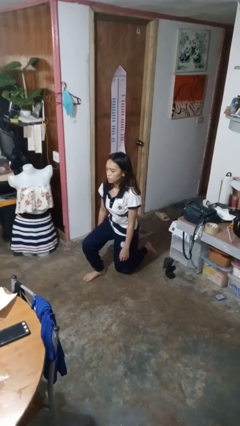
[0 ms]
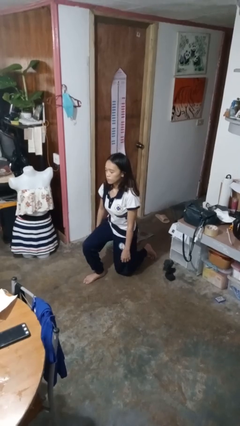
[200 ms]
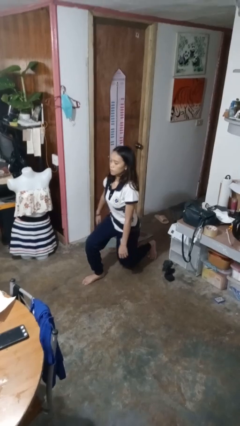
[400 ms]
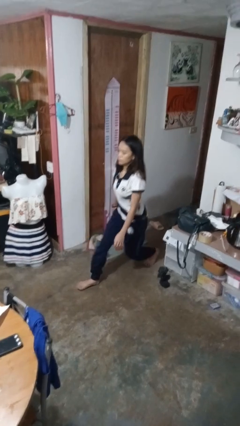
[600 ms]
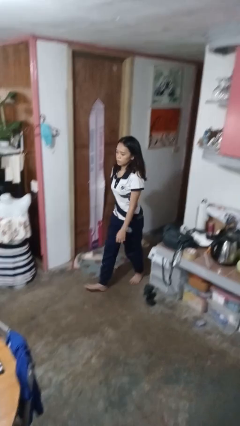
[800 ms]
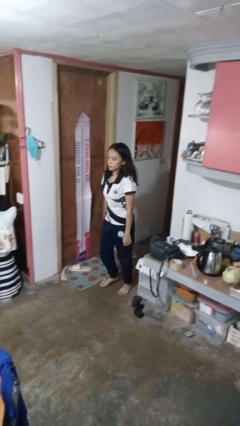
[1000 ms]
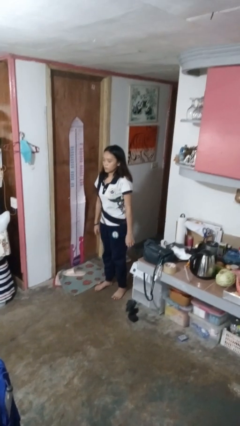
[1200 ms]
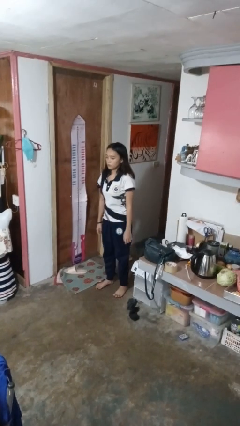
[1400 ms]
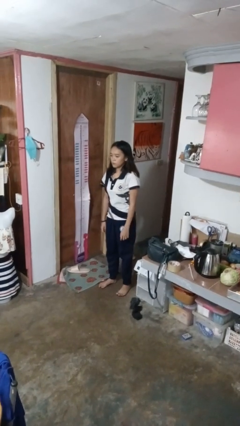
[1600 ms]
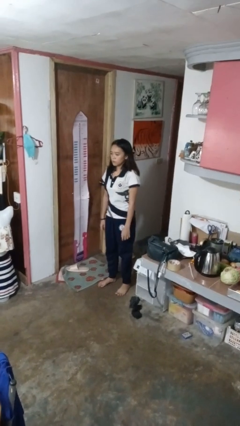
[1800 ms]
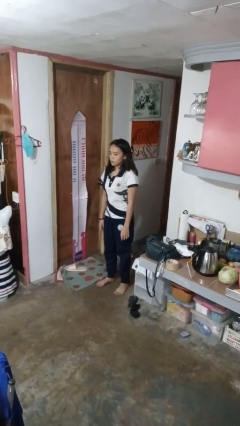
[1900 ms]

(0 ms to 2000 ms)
person stands up from floor

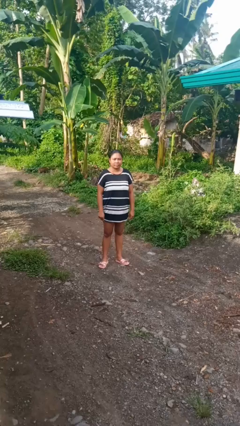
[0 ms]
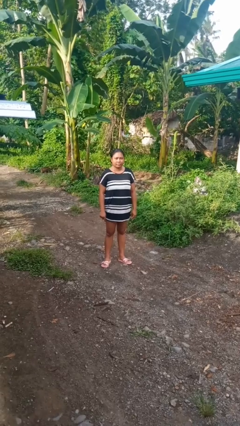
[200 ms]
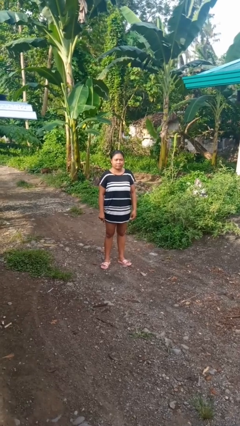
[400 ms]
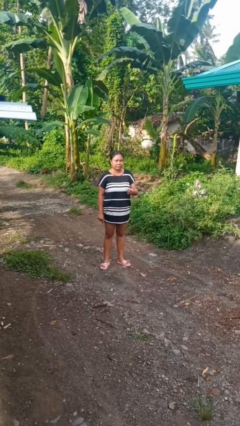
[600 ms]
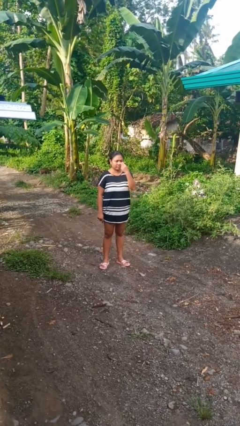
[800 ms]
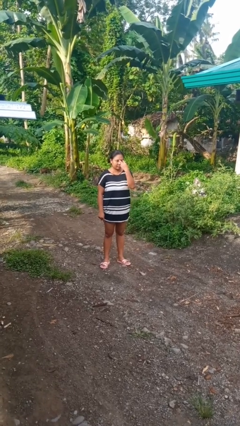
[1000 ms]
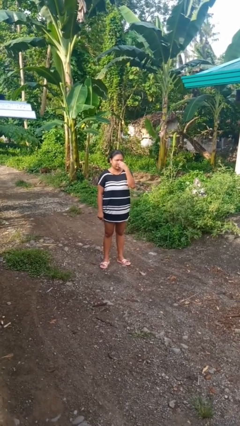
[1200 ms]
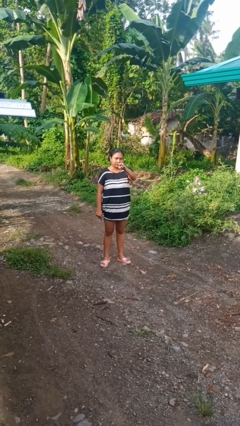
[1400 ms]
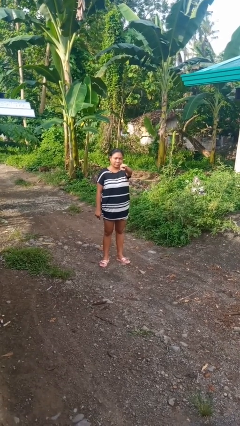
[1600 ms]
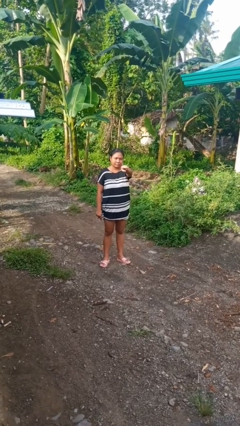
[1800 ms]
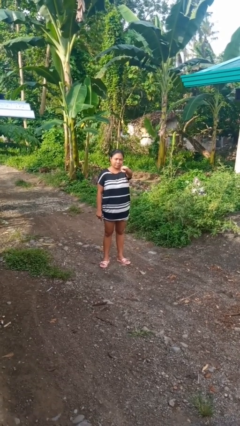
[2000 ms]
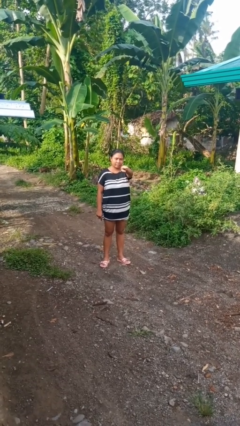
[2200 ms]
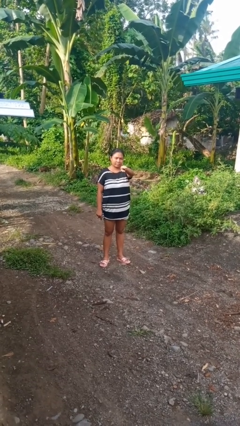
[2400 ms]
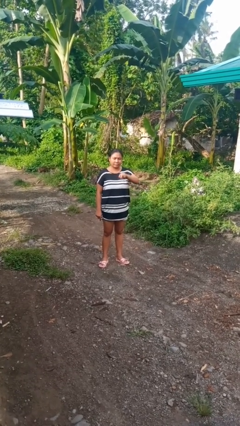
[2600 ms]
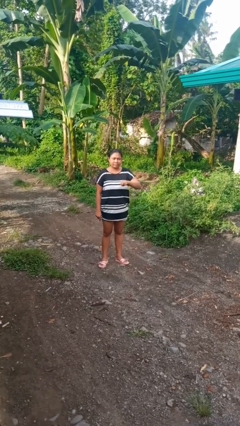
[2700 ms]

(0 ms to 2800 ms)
person gestures watch closely

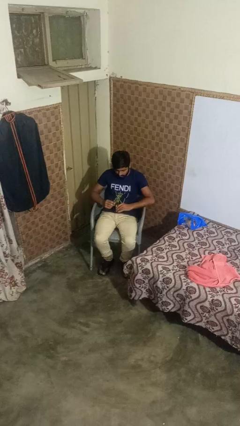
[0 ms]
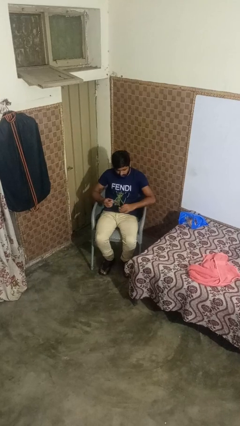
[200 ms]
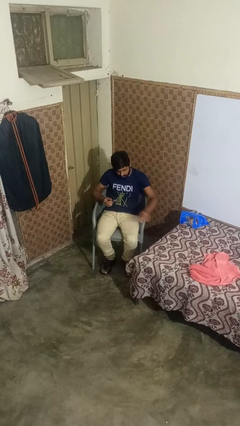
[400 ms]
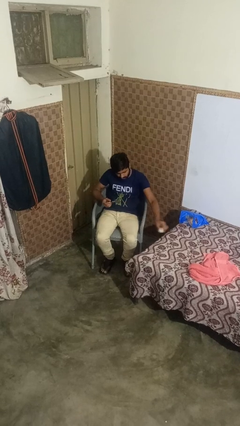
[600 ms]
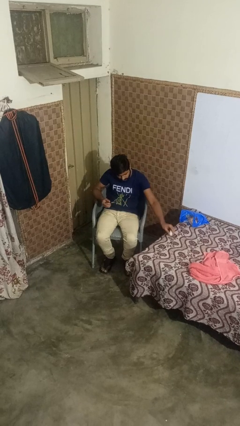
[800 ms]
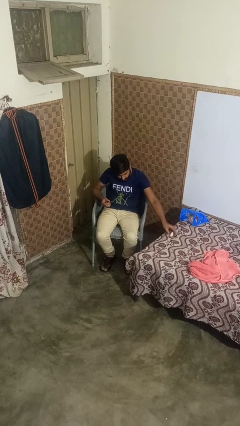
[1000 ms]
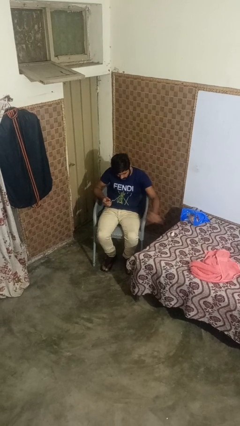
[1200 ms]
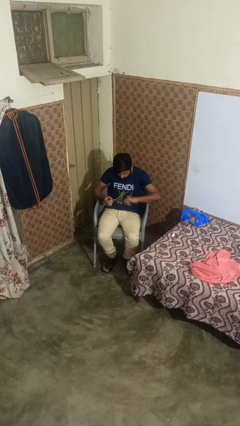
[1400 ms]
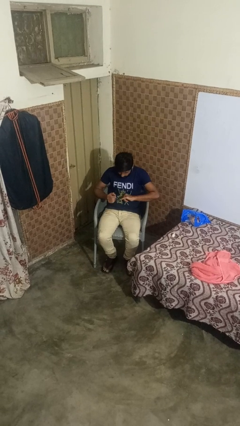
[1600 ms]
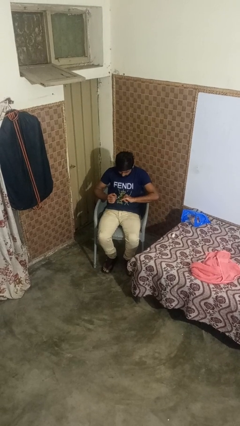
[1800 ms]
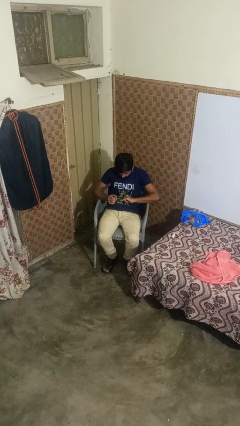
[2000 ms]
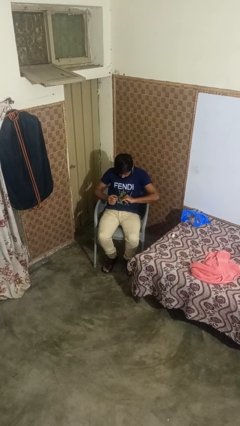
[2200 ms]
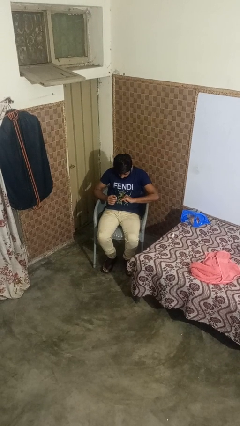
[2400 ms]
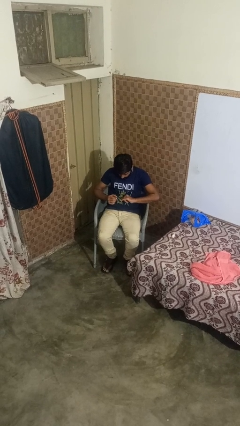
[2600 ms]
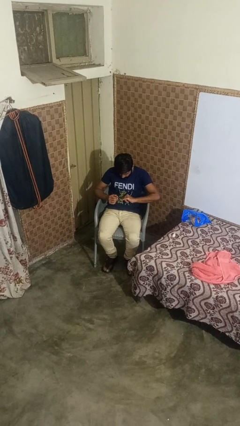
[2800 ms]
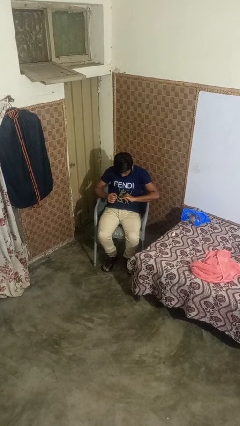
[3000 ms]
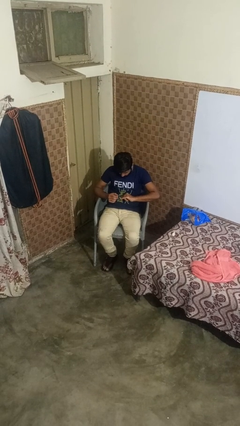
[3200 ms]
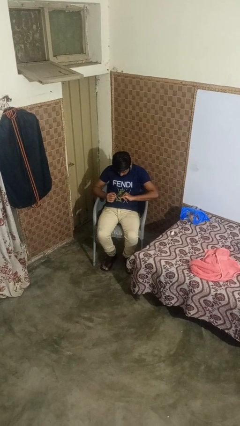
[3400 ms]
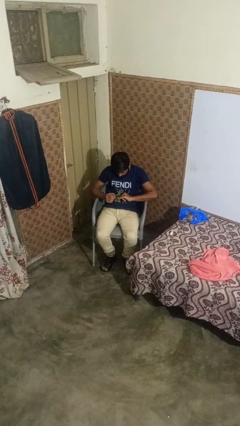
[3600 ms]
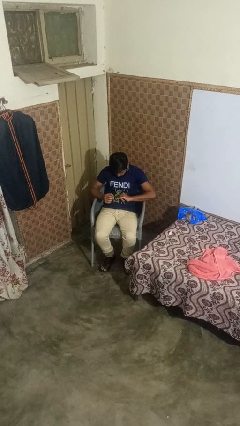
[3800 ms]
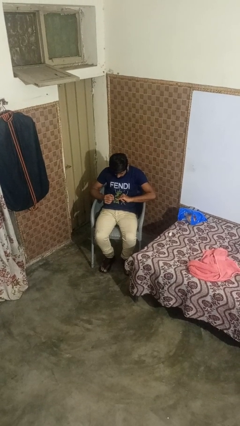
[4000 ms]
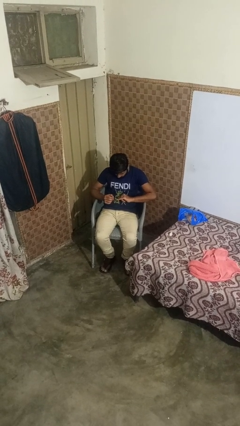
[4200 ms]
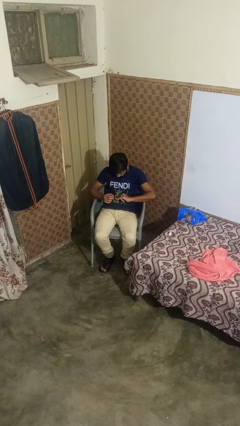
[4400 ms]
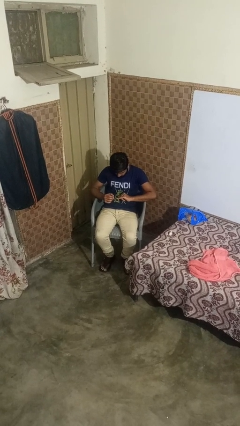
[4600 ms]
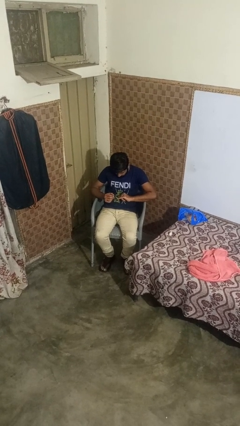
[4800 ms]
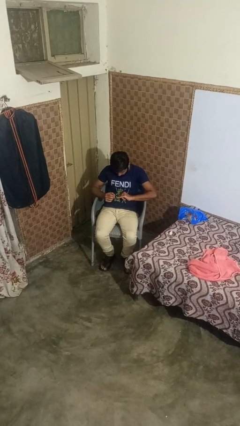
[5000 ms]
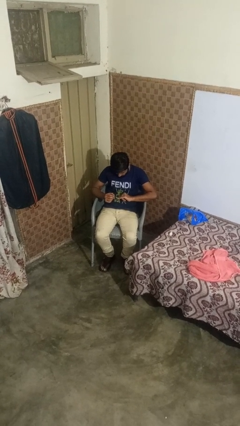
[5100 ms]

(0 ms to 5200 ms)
person paints fingernails

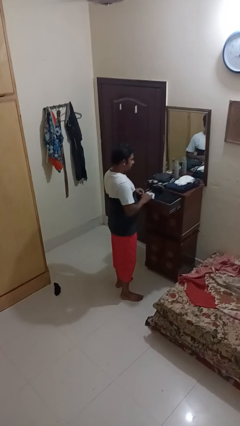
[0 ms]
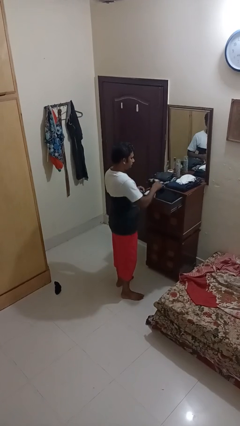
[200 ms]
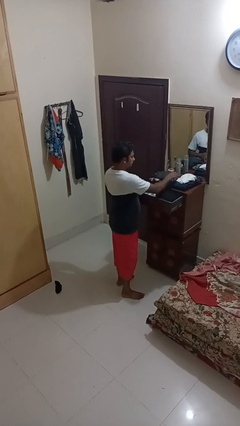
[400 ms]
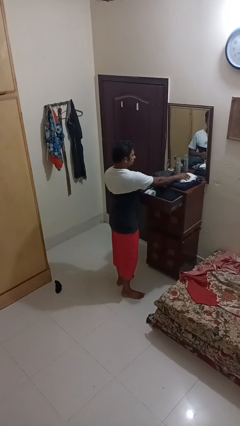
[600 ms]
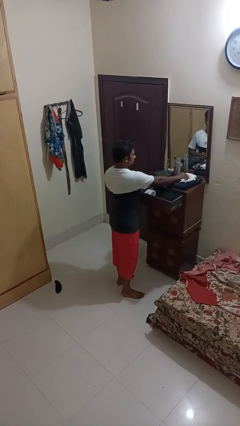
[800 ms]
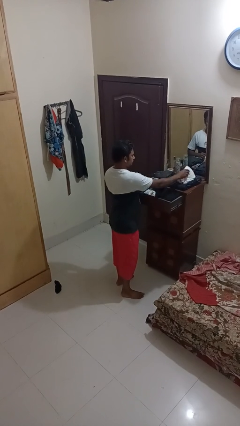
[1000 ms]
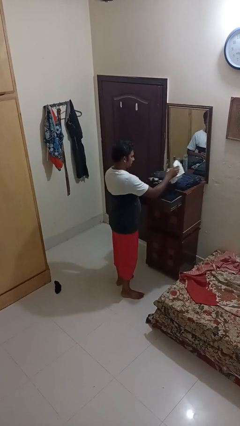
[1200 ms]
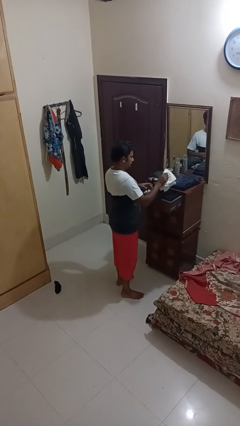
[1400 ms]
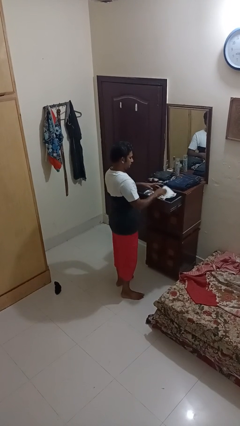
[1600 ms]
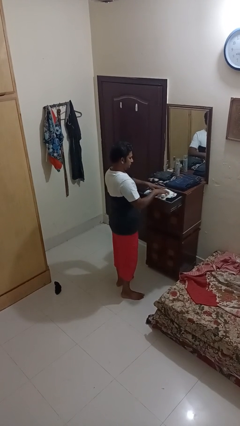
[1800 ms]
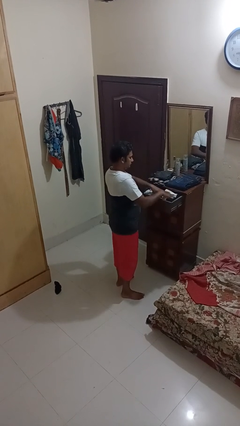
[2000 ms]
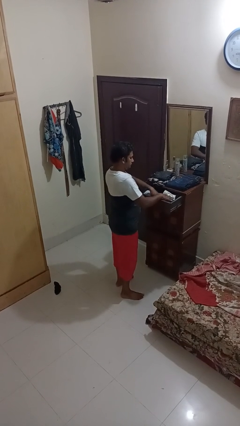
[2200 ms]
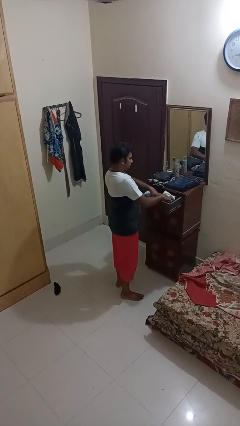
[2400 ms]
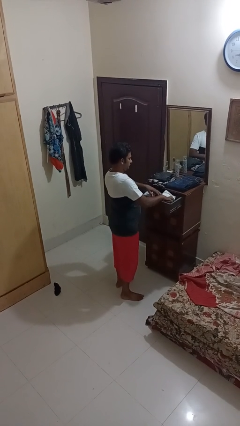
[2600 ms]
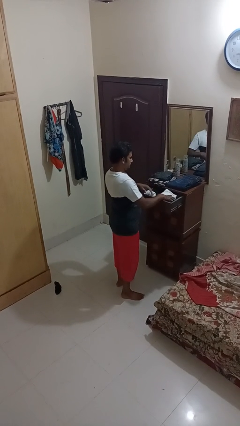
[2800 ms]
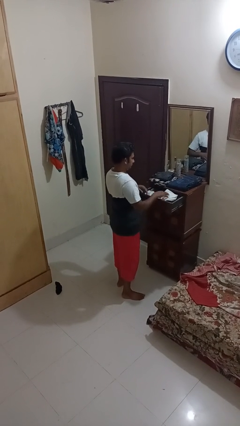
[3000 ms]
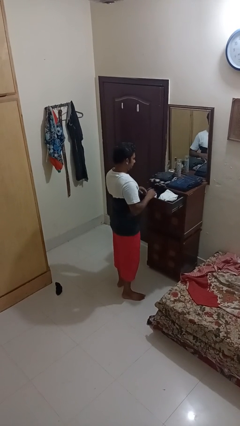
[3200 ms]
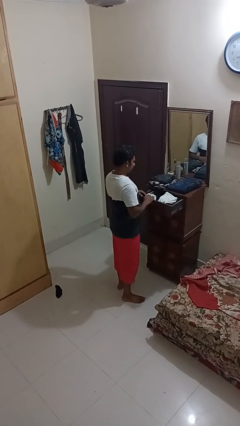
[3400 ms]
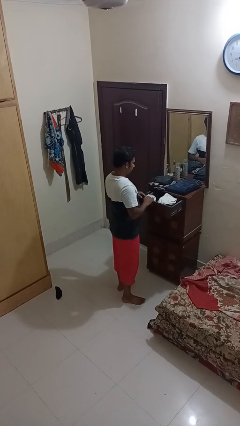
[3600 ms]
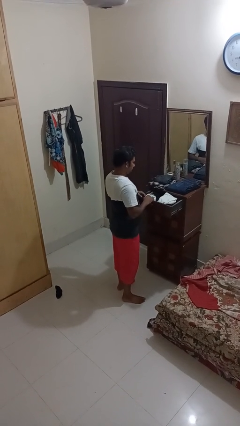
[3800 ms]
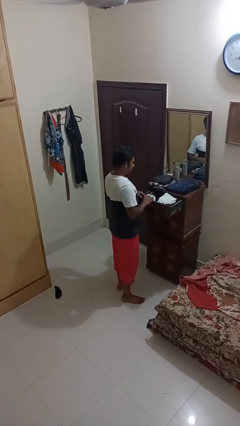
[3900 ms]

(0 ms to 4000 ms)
person puts clothes into dresser

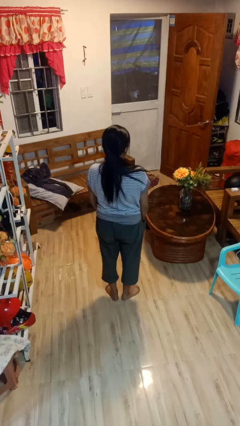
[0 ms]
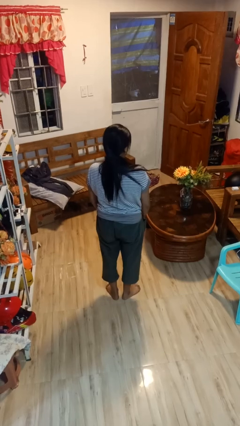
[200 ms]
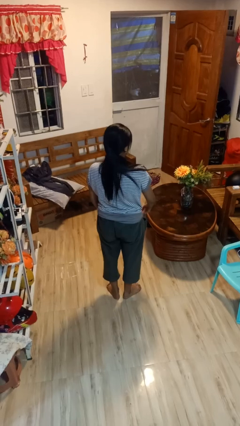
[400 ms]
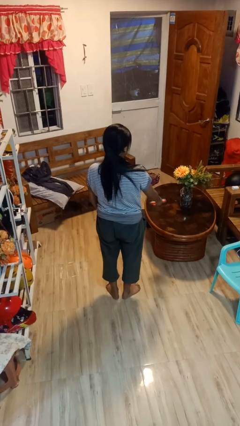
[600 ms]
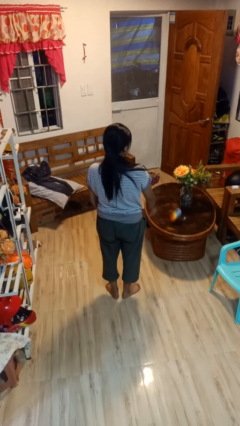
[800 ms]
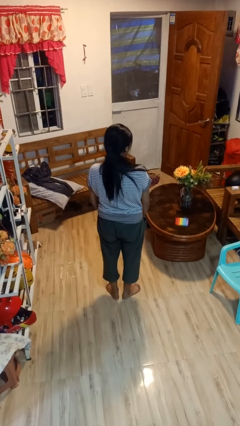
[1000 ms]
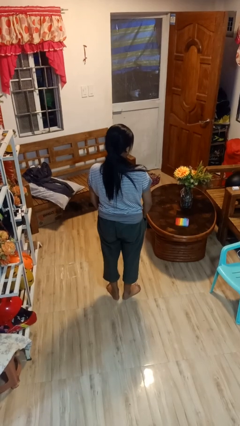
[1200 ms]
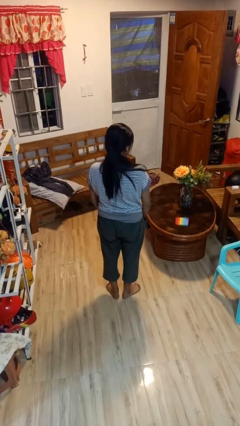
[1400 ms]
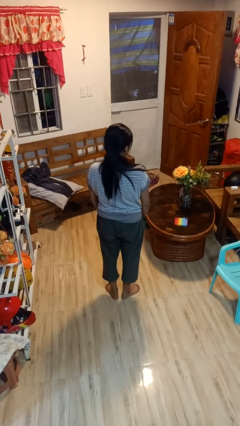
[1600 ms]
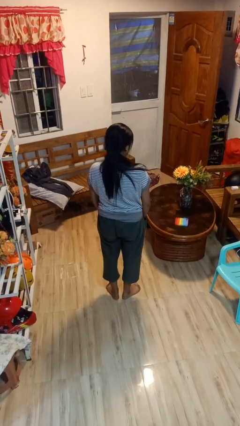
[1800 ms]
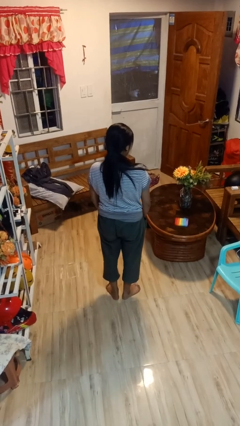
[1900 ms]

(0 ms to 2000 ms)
person throws object on table

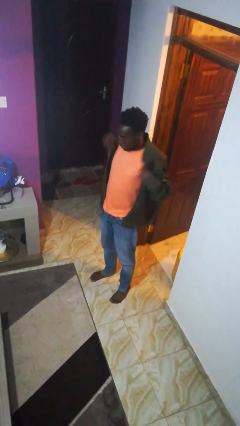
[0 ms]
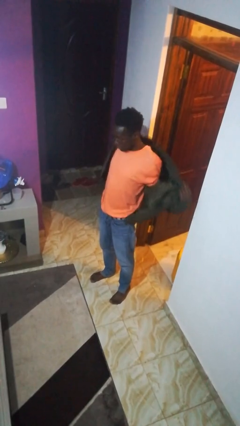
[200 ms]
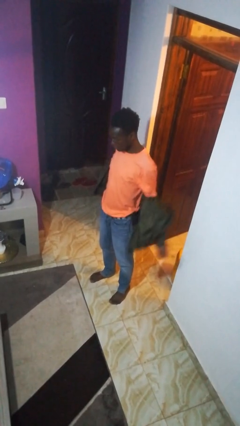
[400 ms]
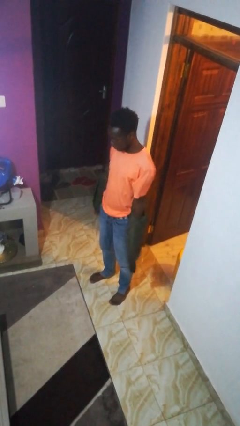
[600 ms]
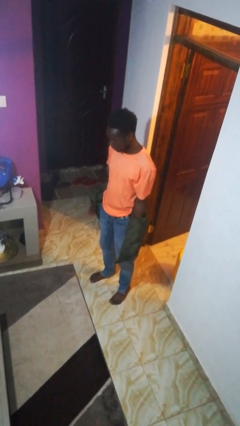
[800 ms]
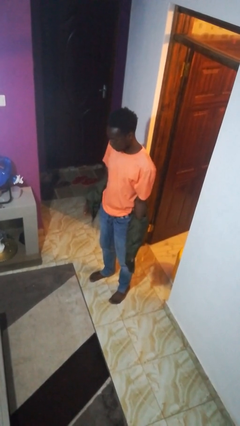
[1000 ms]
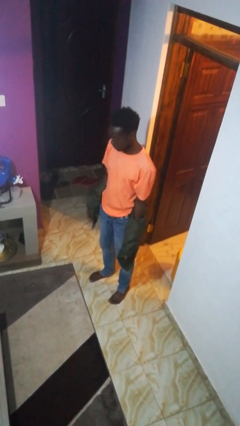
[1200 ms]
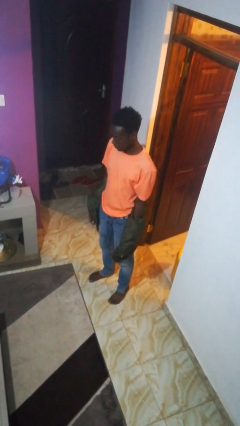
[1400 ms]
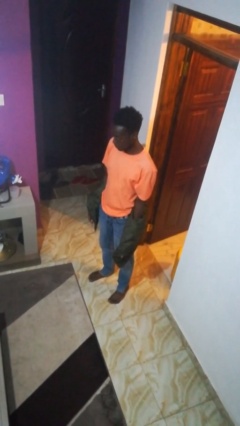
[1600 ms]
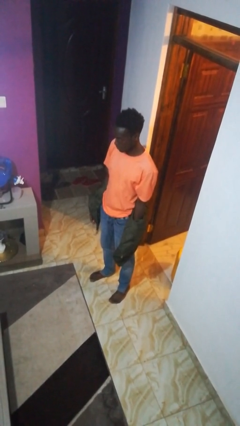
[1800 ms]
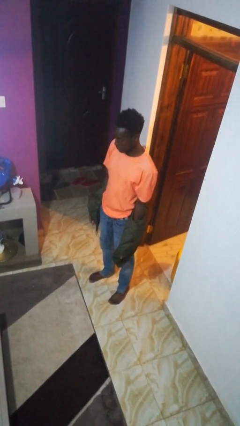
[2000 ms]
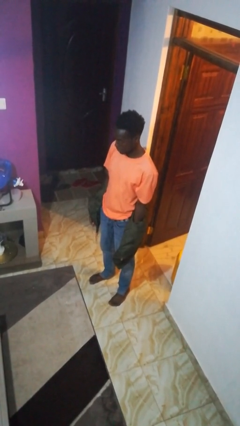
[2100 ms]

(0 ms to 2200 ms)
person takes off jacket
